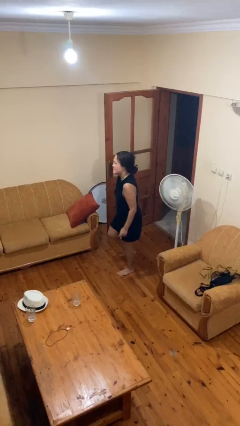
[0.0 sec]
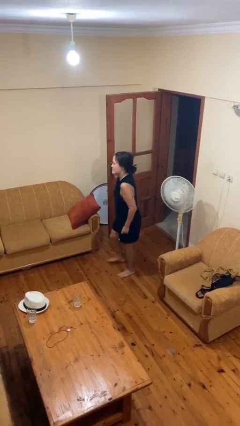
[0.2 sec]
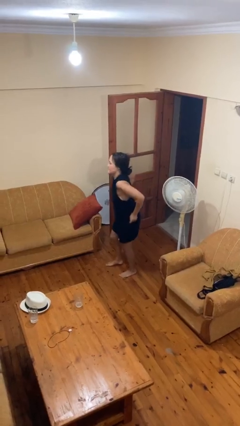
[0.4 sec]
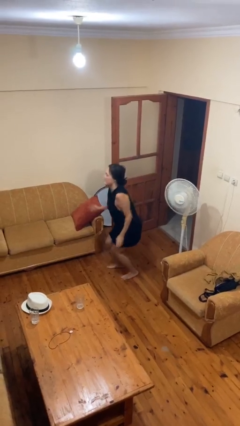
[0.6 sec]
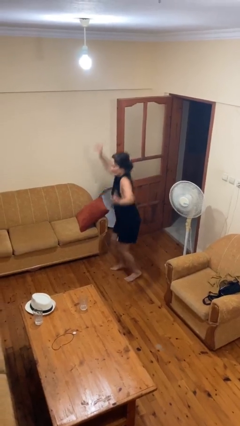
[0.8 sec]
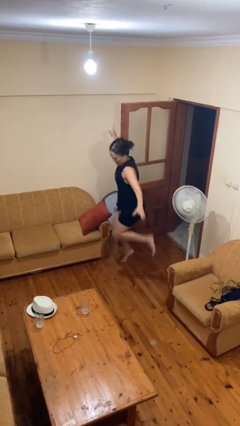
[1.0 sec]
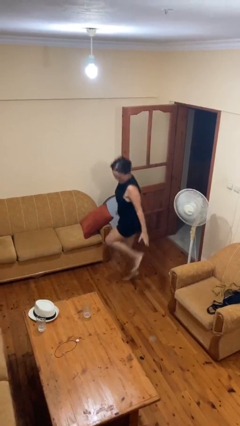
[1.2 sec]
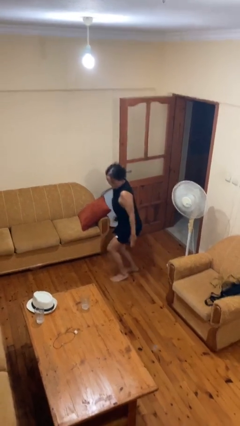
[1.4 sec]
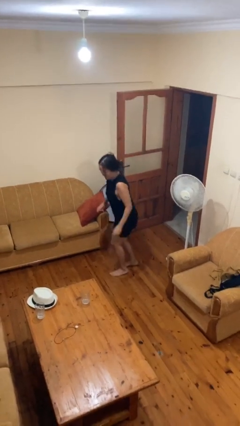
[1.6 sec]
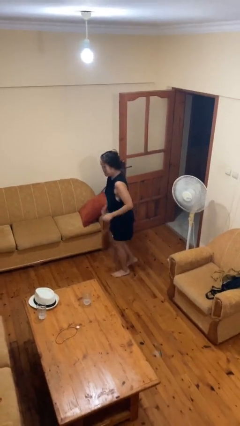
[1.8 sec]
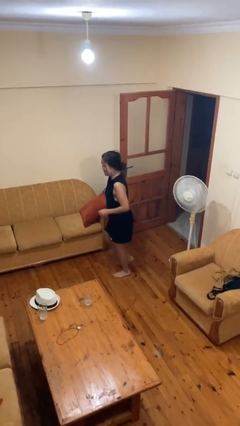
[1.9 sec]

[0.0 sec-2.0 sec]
person jumps

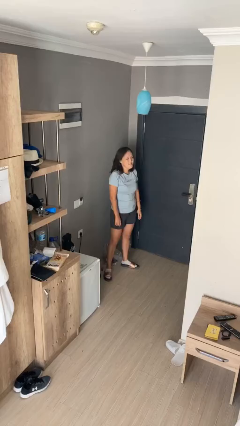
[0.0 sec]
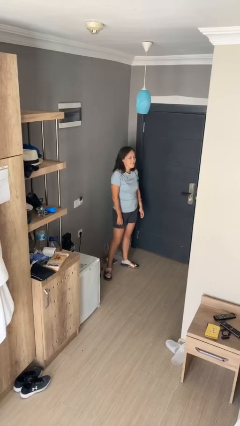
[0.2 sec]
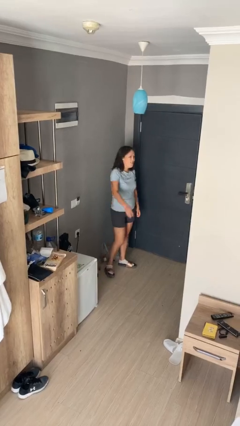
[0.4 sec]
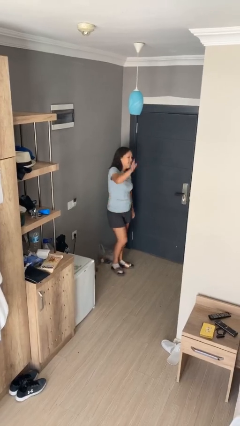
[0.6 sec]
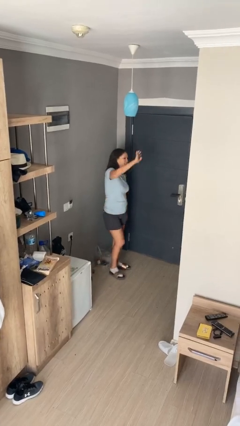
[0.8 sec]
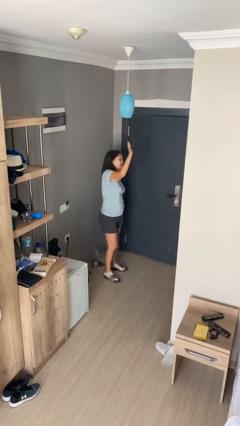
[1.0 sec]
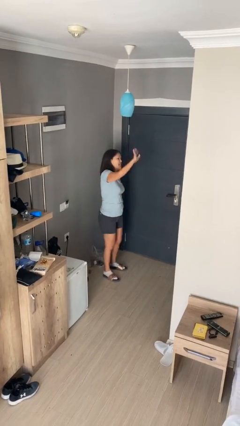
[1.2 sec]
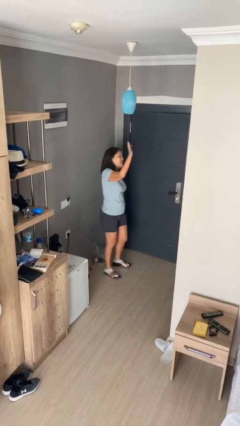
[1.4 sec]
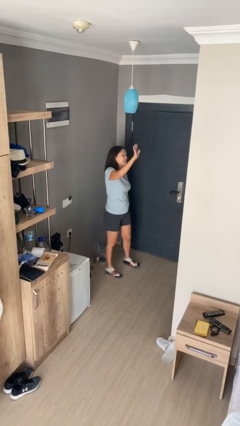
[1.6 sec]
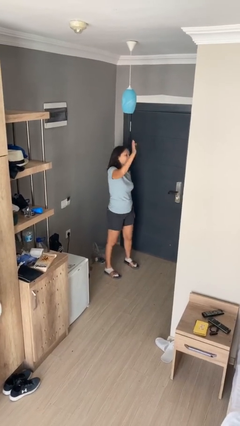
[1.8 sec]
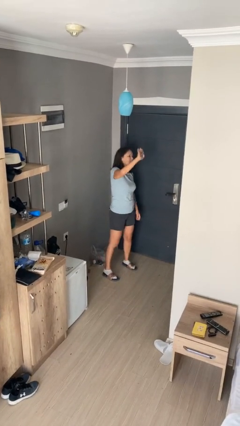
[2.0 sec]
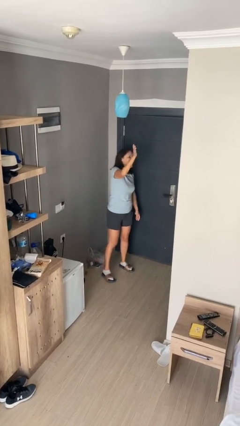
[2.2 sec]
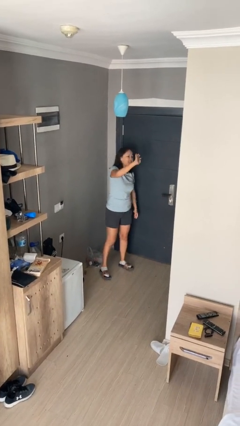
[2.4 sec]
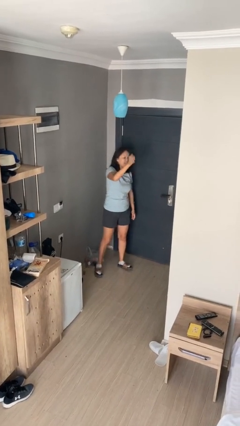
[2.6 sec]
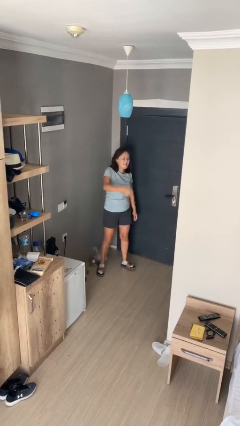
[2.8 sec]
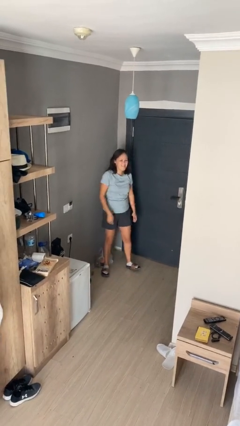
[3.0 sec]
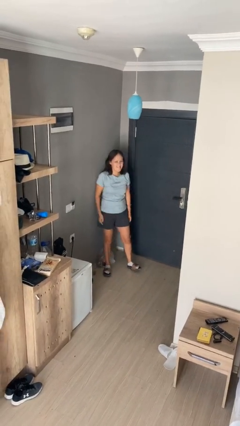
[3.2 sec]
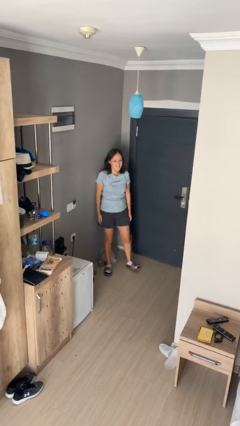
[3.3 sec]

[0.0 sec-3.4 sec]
person waves at person

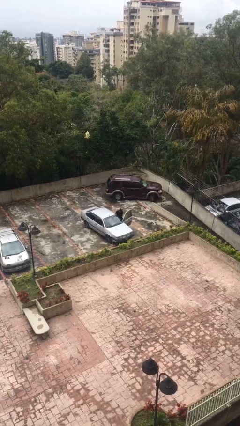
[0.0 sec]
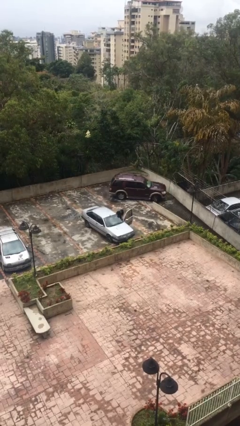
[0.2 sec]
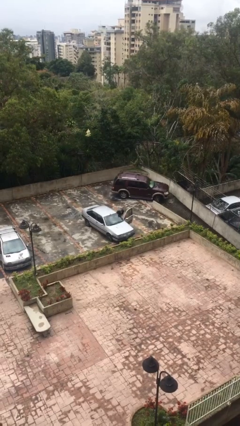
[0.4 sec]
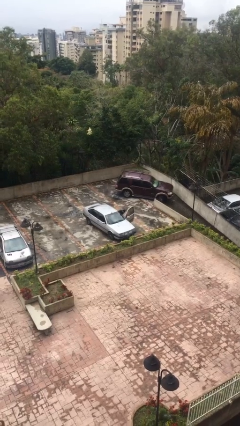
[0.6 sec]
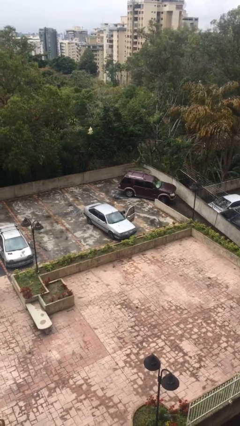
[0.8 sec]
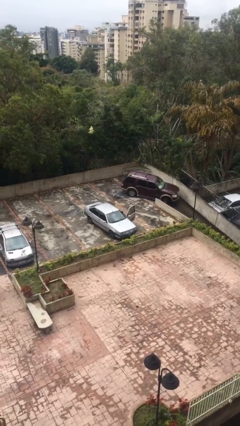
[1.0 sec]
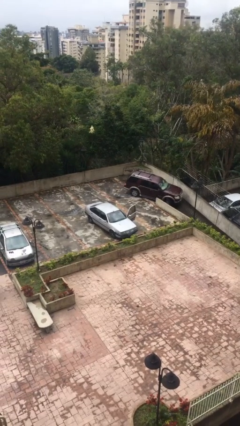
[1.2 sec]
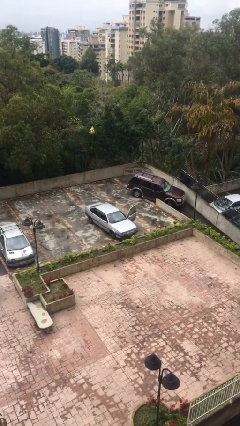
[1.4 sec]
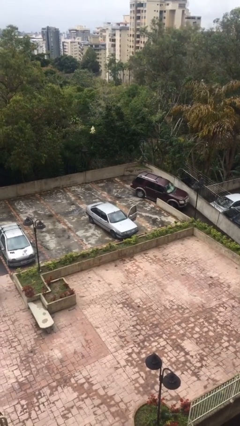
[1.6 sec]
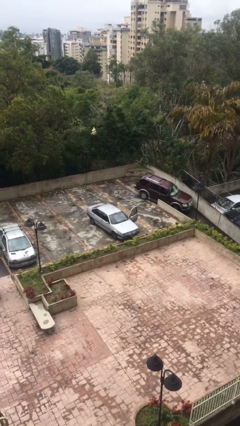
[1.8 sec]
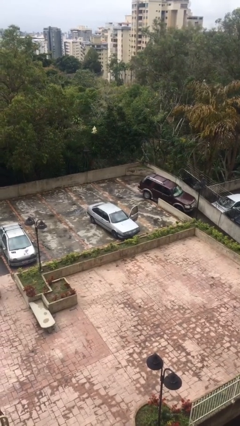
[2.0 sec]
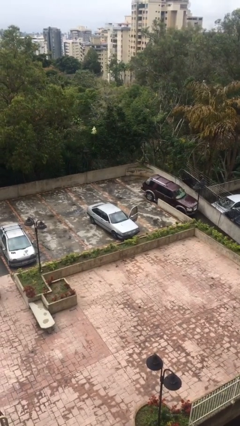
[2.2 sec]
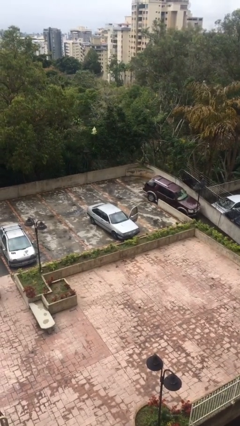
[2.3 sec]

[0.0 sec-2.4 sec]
person enters car

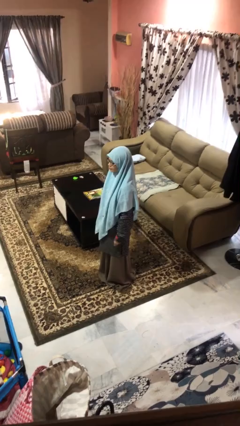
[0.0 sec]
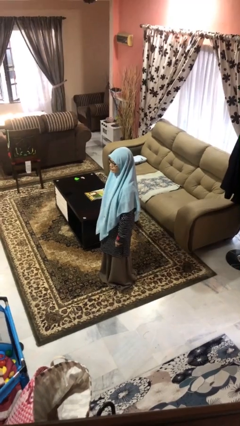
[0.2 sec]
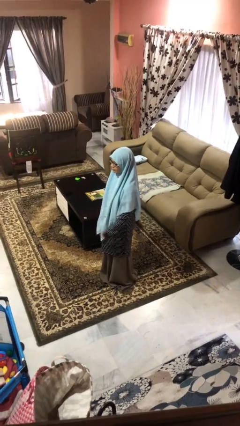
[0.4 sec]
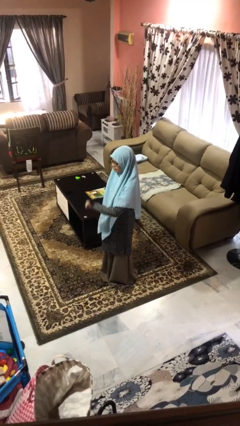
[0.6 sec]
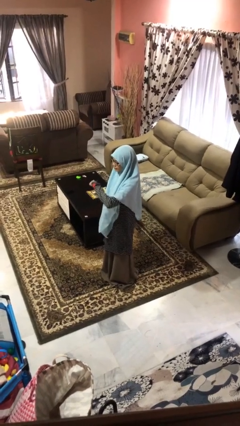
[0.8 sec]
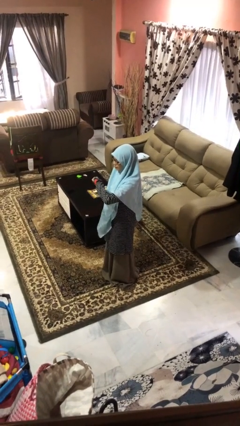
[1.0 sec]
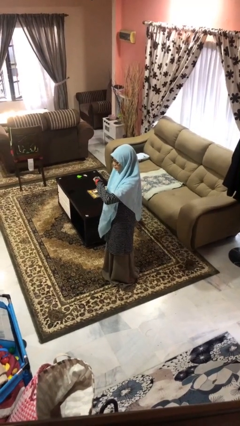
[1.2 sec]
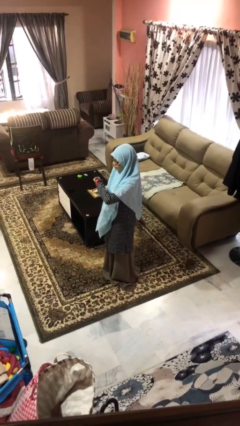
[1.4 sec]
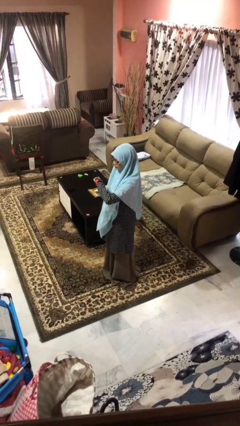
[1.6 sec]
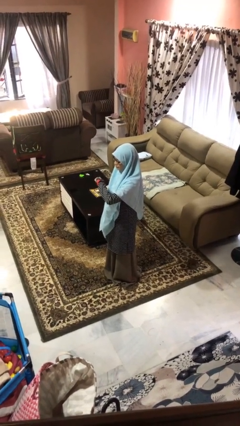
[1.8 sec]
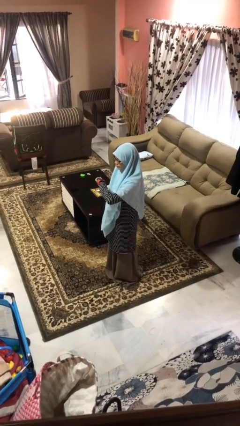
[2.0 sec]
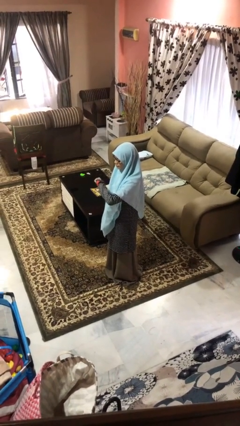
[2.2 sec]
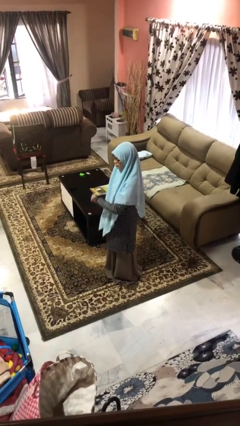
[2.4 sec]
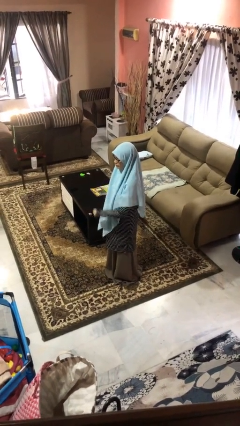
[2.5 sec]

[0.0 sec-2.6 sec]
person looks at wristwatch

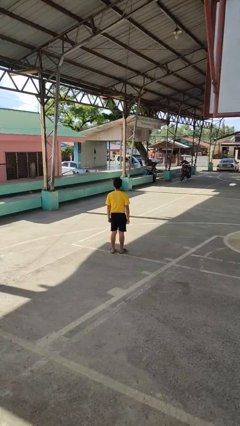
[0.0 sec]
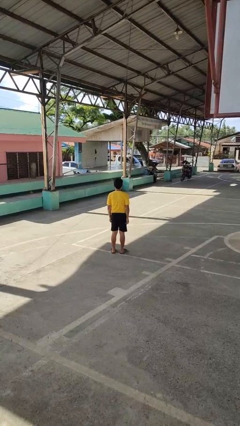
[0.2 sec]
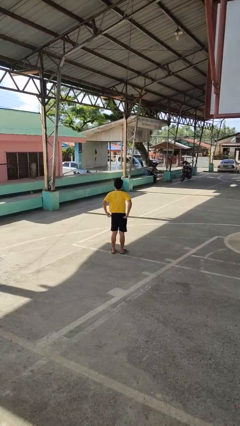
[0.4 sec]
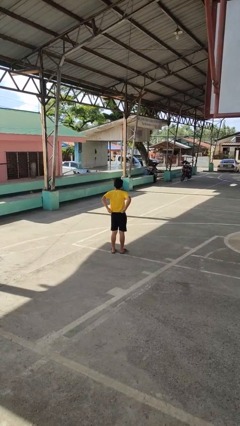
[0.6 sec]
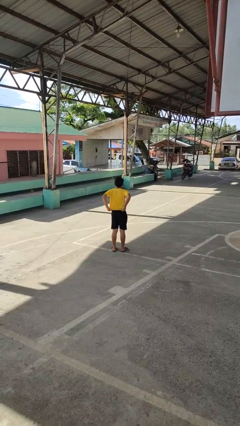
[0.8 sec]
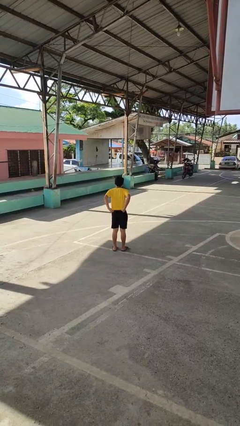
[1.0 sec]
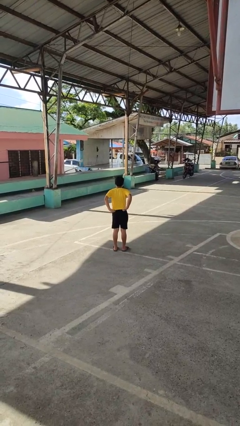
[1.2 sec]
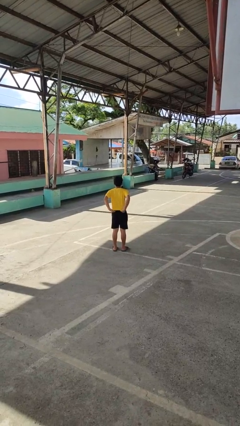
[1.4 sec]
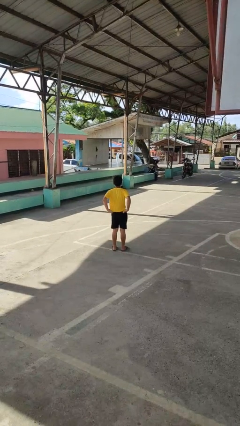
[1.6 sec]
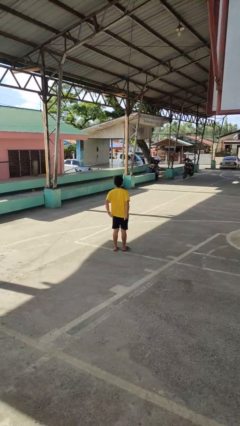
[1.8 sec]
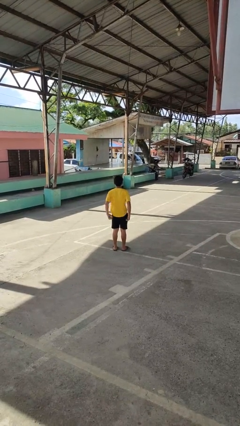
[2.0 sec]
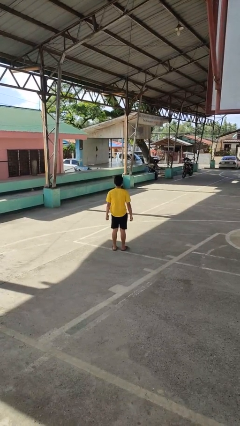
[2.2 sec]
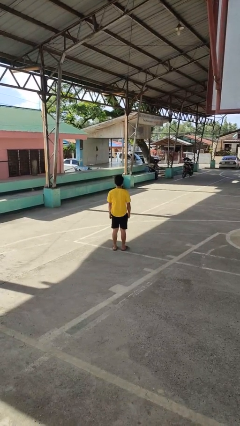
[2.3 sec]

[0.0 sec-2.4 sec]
person untucks shirt

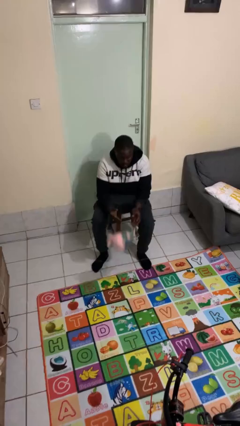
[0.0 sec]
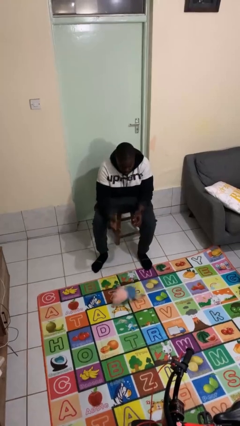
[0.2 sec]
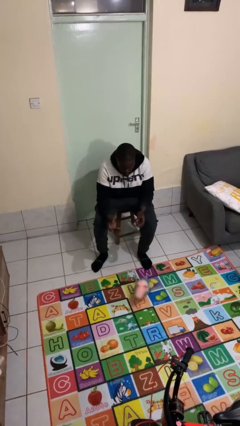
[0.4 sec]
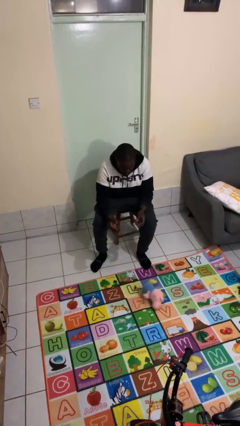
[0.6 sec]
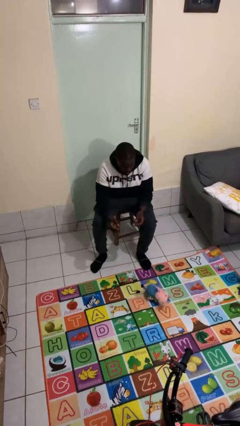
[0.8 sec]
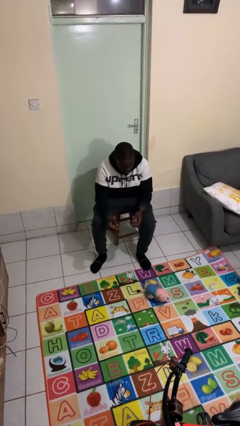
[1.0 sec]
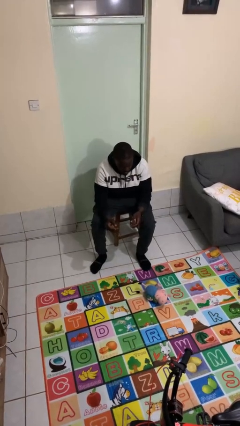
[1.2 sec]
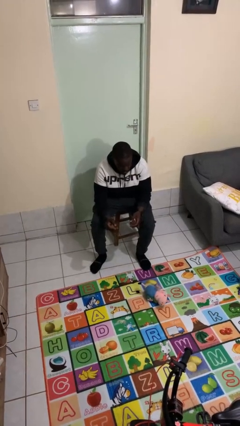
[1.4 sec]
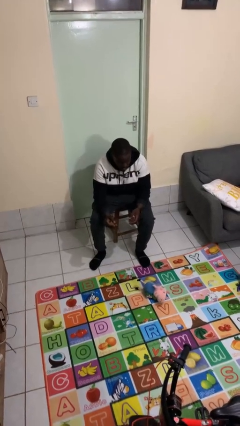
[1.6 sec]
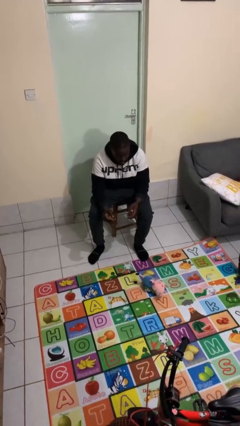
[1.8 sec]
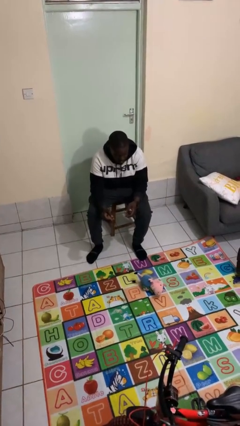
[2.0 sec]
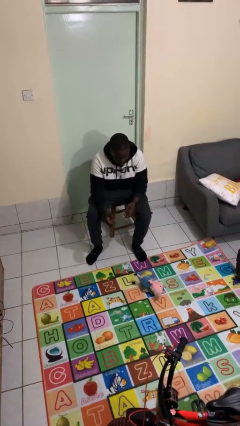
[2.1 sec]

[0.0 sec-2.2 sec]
person drops object

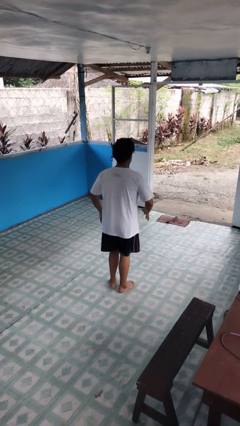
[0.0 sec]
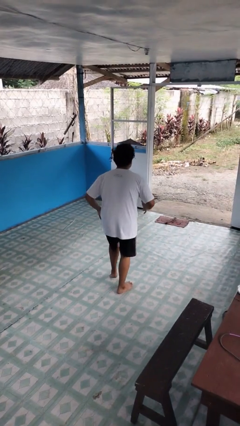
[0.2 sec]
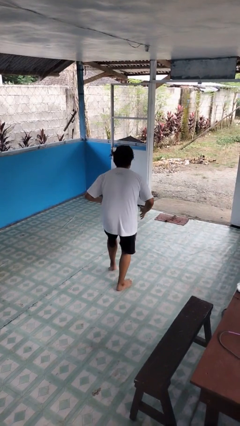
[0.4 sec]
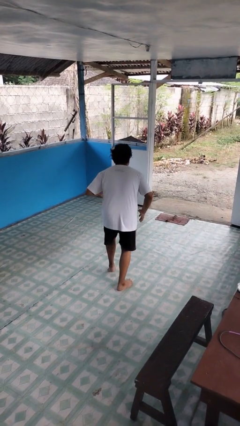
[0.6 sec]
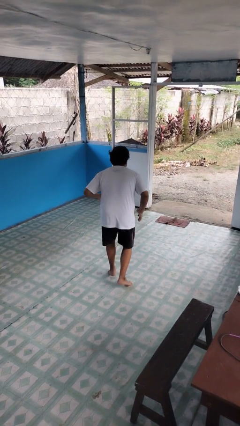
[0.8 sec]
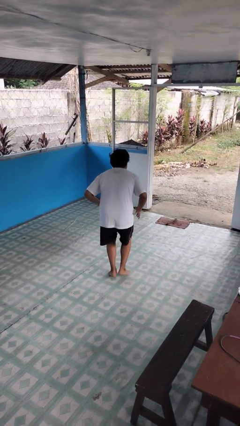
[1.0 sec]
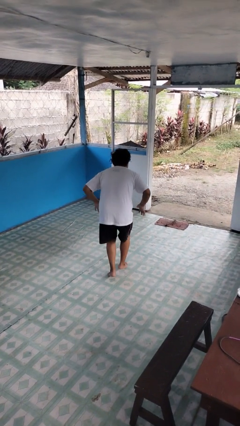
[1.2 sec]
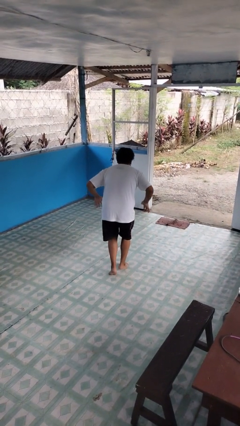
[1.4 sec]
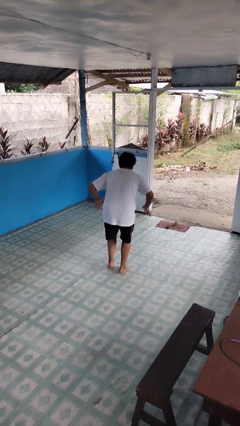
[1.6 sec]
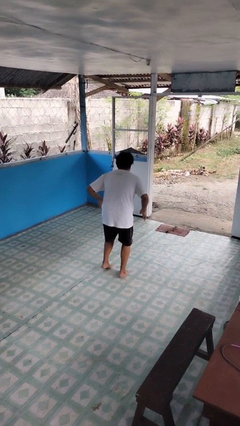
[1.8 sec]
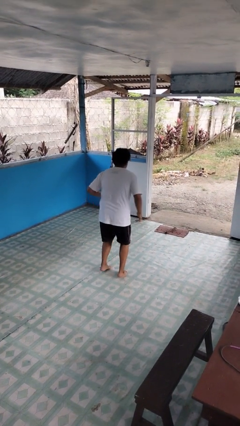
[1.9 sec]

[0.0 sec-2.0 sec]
person walks tiptoe
